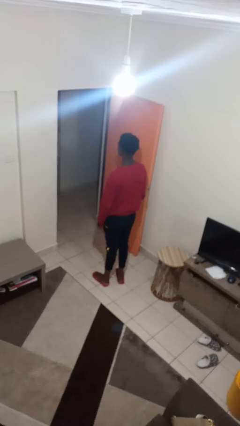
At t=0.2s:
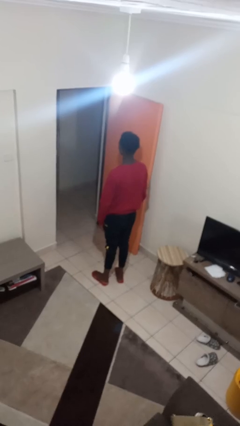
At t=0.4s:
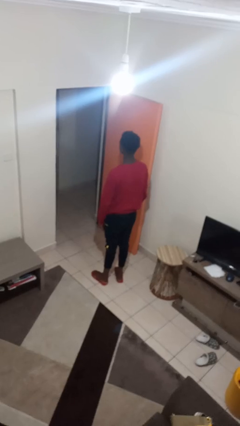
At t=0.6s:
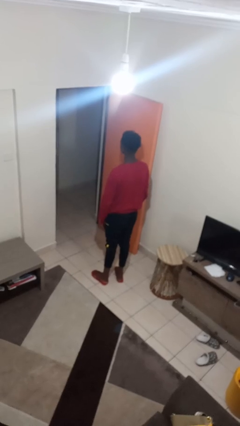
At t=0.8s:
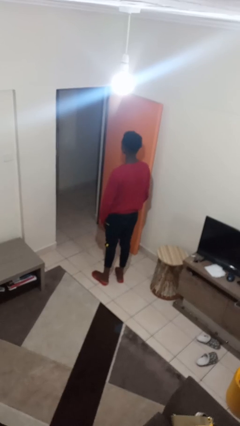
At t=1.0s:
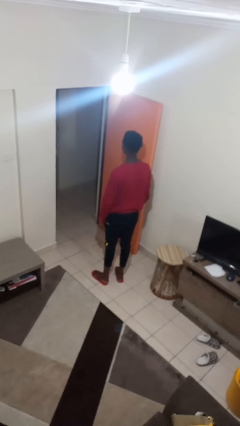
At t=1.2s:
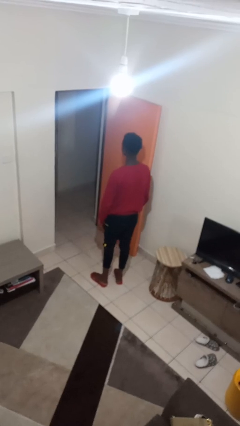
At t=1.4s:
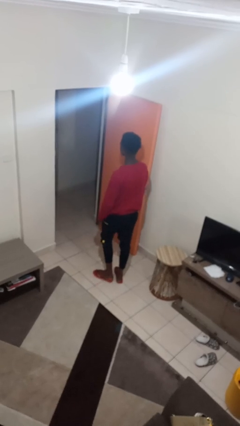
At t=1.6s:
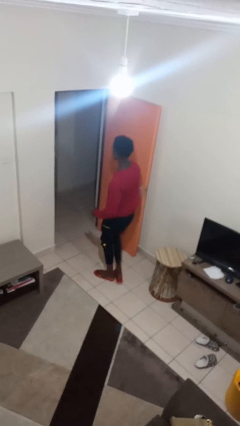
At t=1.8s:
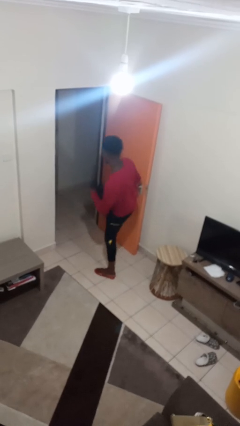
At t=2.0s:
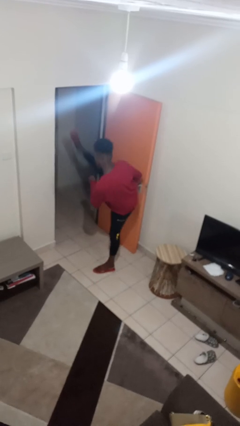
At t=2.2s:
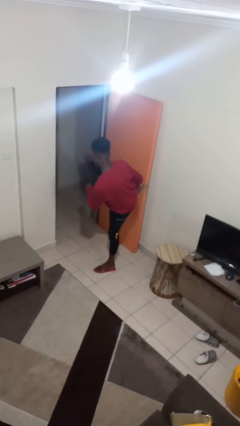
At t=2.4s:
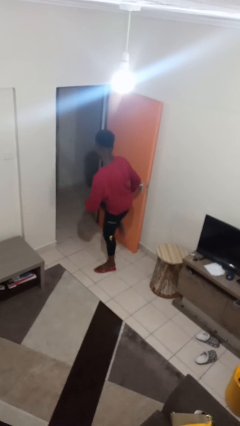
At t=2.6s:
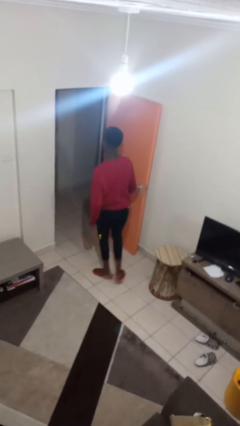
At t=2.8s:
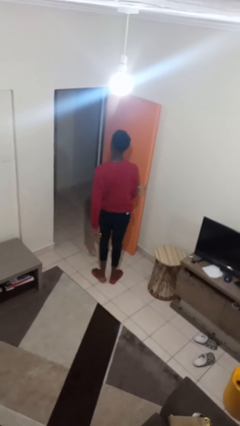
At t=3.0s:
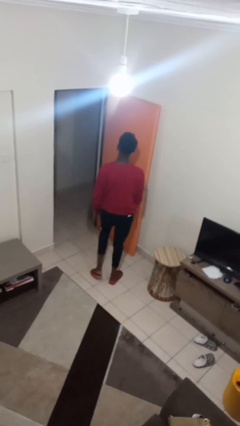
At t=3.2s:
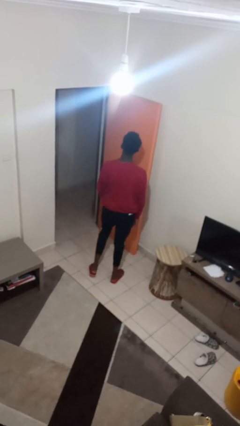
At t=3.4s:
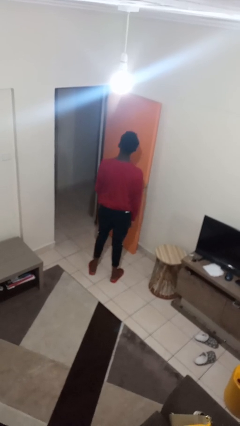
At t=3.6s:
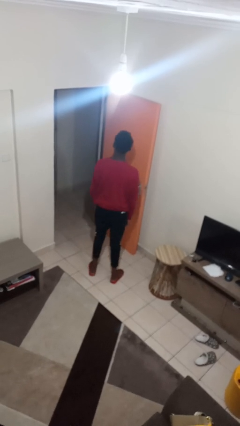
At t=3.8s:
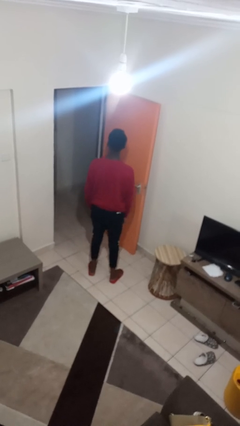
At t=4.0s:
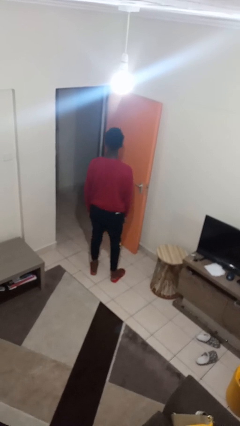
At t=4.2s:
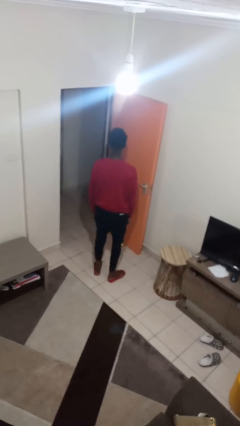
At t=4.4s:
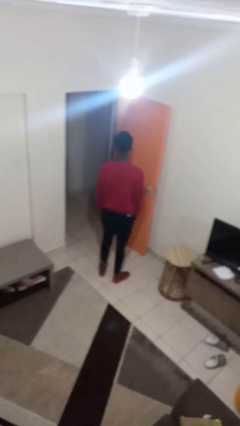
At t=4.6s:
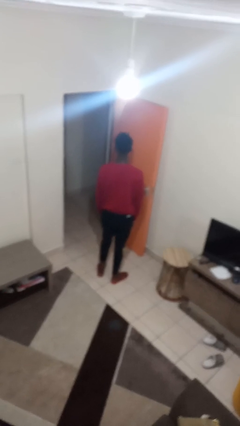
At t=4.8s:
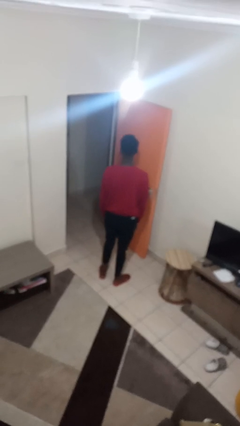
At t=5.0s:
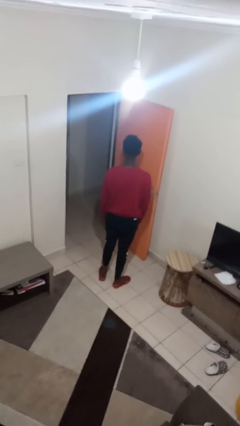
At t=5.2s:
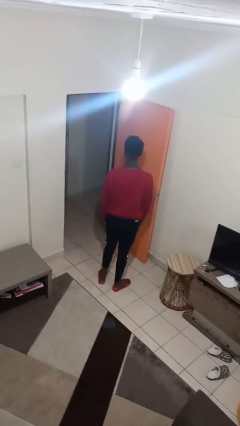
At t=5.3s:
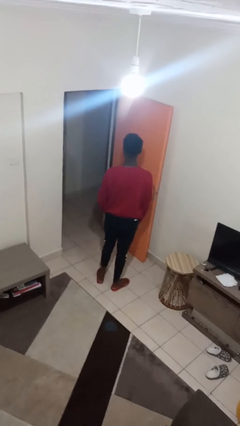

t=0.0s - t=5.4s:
person karate kicks

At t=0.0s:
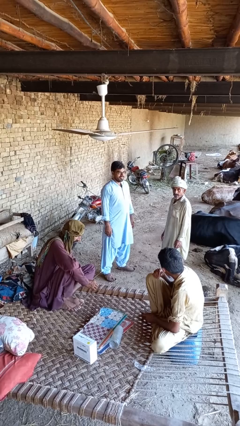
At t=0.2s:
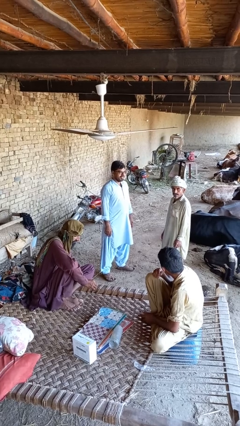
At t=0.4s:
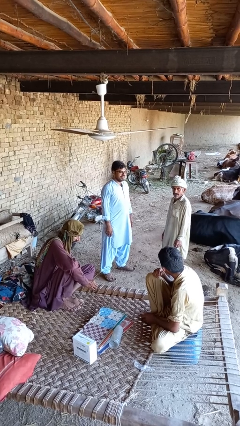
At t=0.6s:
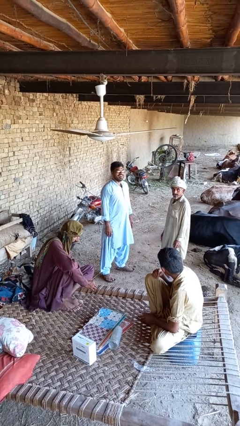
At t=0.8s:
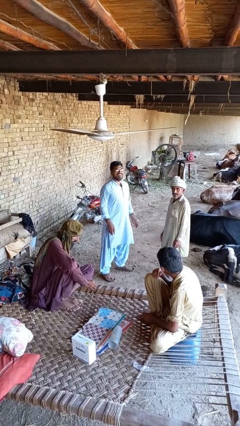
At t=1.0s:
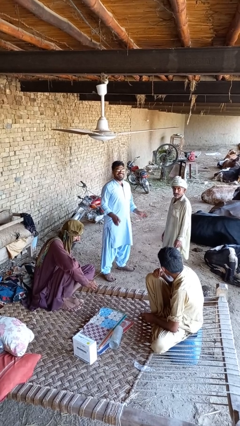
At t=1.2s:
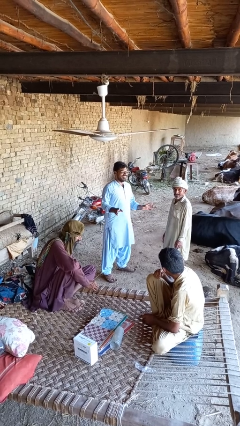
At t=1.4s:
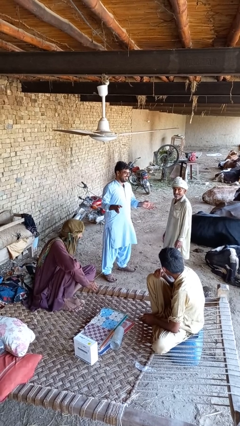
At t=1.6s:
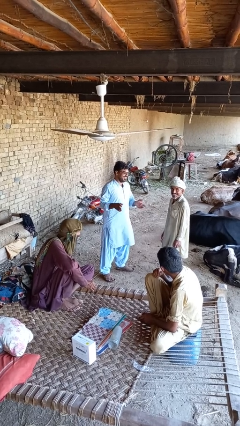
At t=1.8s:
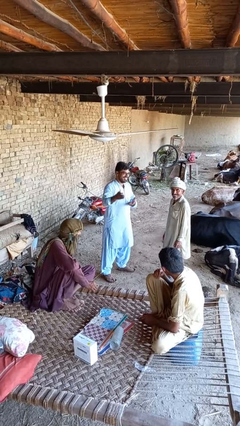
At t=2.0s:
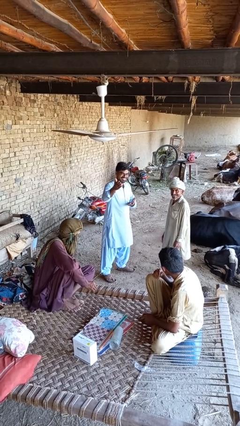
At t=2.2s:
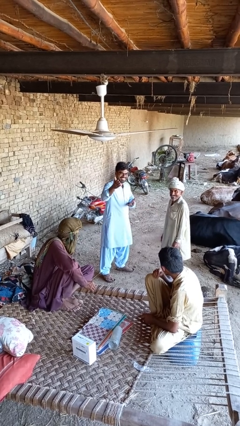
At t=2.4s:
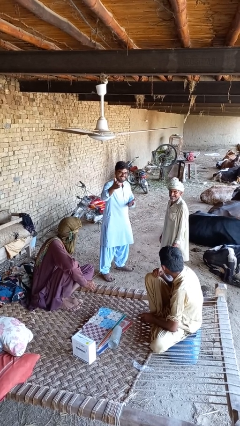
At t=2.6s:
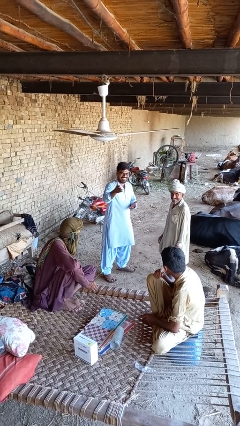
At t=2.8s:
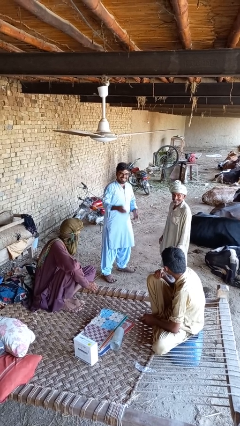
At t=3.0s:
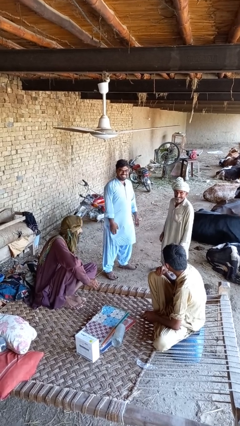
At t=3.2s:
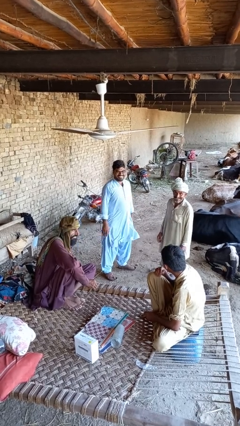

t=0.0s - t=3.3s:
person laughs with person

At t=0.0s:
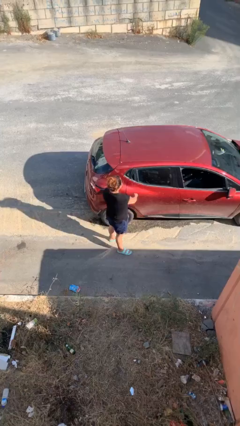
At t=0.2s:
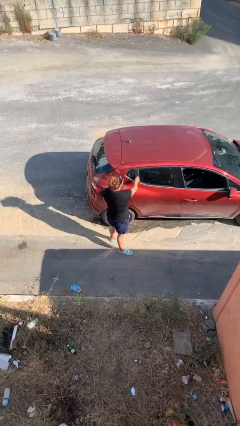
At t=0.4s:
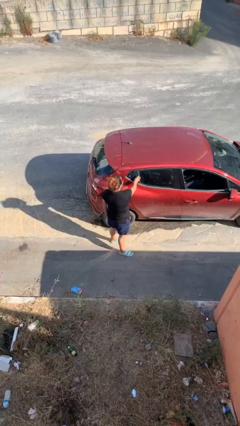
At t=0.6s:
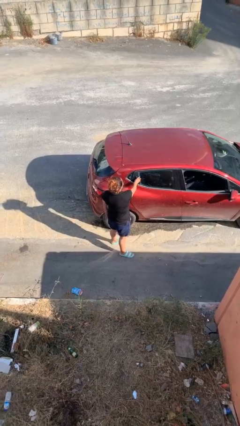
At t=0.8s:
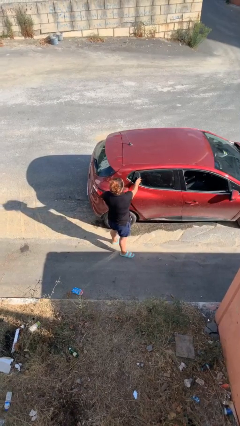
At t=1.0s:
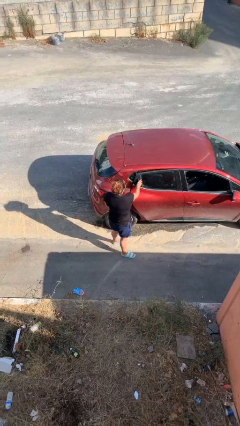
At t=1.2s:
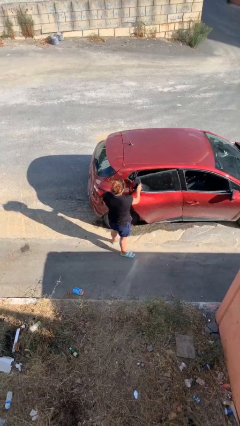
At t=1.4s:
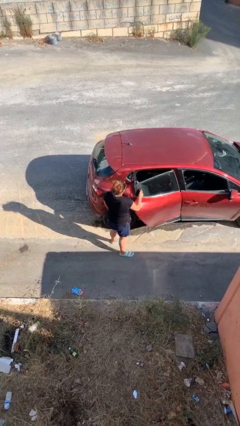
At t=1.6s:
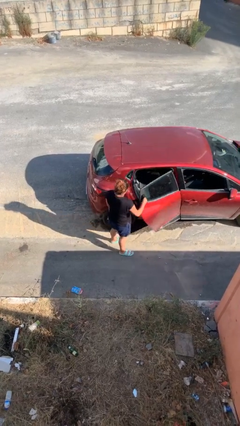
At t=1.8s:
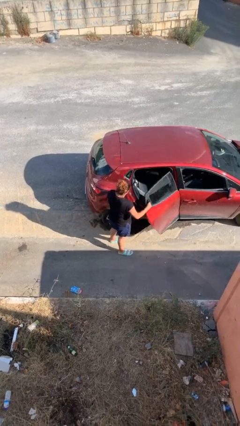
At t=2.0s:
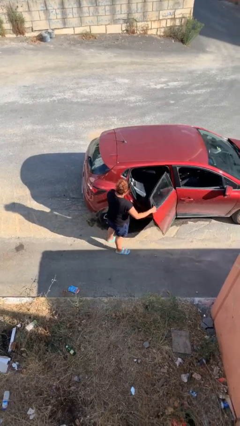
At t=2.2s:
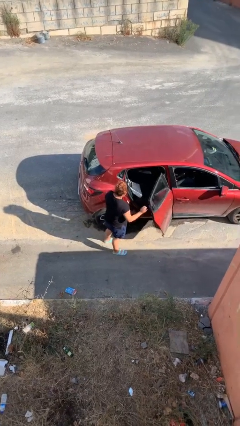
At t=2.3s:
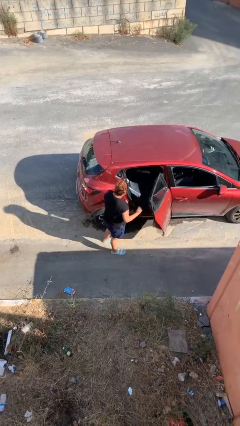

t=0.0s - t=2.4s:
person opens car door

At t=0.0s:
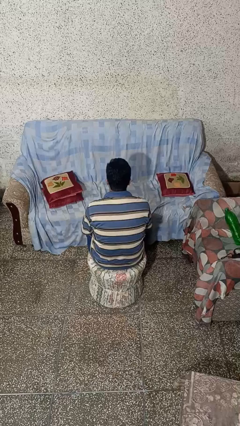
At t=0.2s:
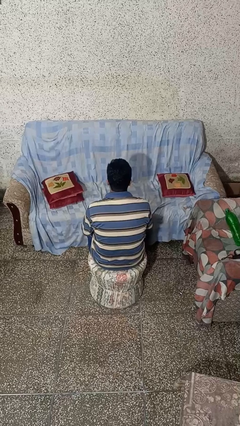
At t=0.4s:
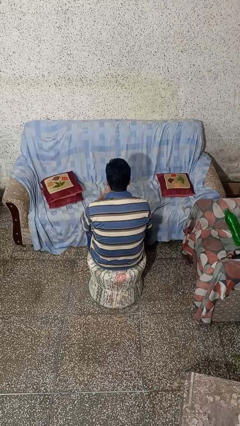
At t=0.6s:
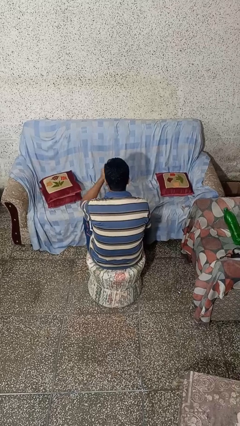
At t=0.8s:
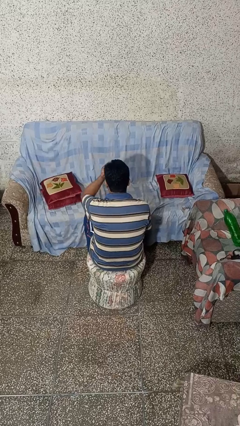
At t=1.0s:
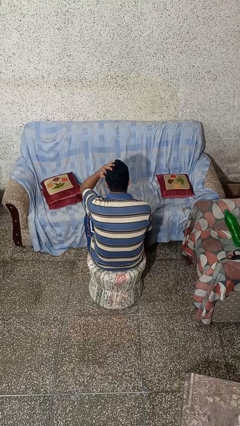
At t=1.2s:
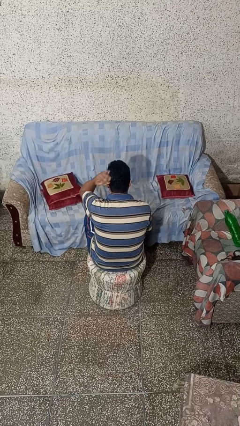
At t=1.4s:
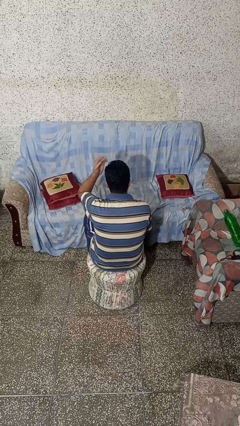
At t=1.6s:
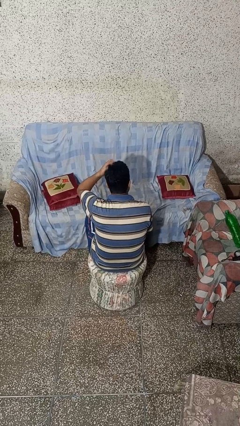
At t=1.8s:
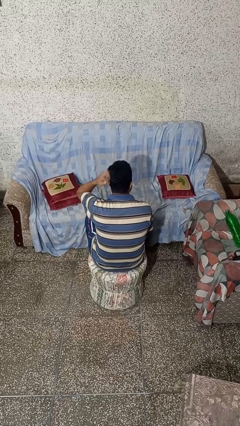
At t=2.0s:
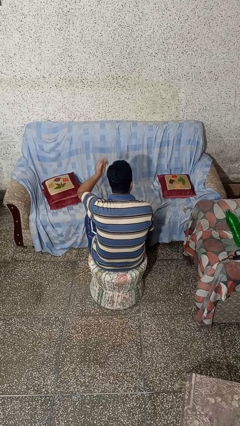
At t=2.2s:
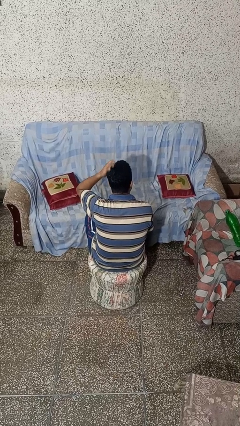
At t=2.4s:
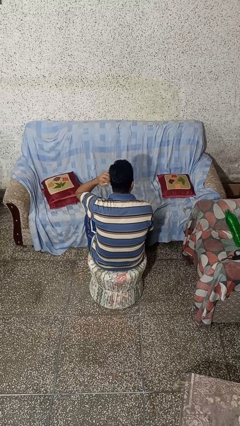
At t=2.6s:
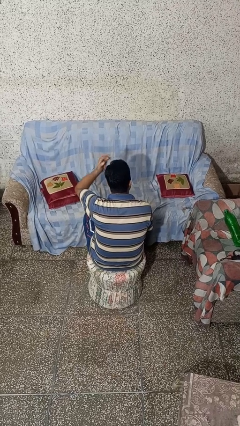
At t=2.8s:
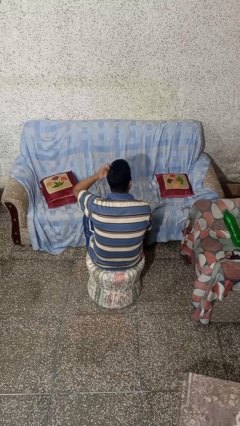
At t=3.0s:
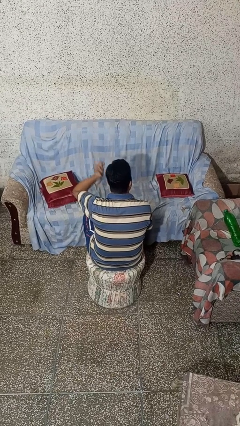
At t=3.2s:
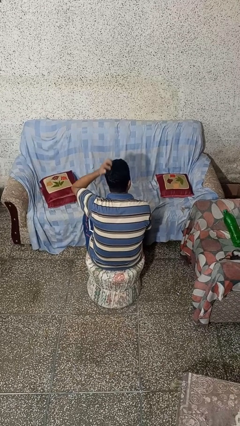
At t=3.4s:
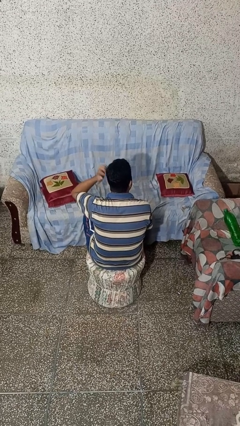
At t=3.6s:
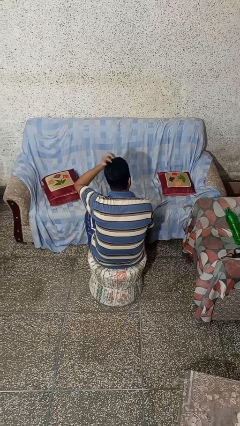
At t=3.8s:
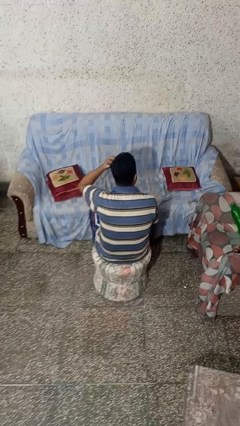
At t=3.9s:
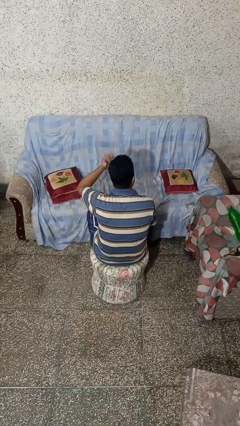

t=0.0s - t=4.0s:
person strokes hair

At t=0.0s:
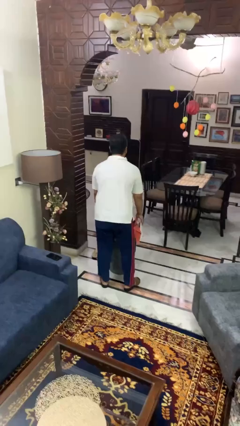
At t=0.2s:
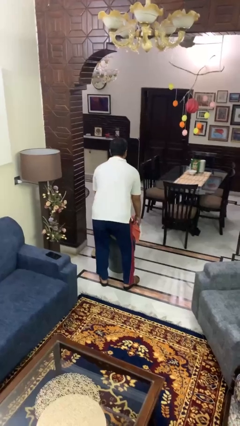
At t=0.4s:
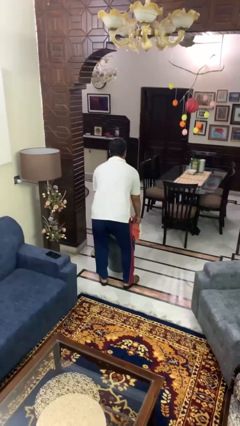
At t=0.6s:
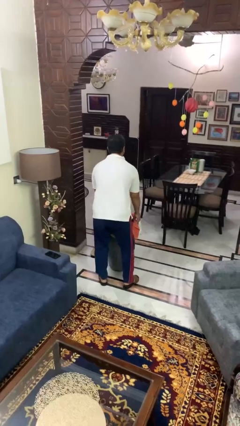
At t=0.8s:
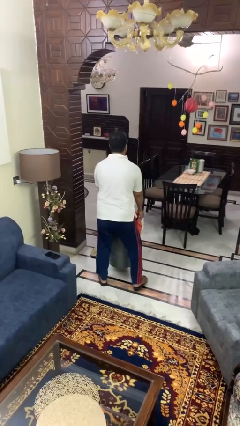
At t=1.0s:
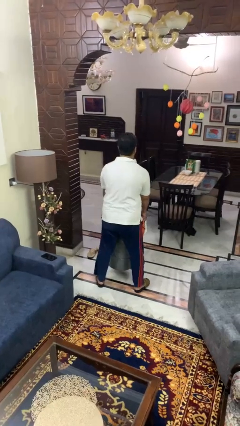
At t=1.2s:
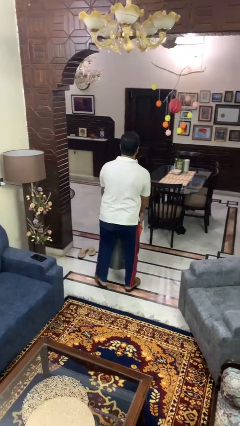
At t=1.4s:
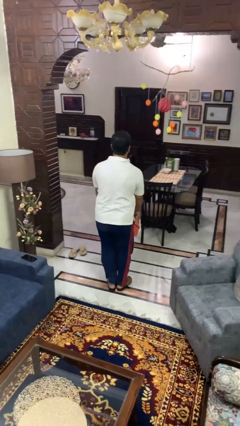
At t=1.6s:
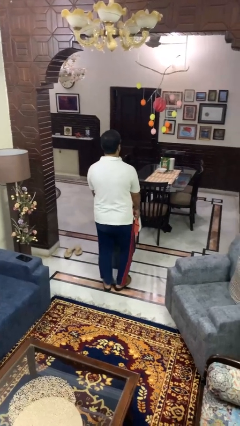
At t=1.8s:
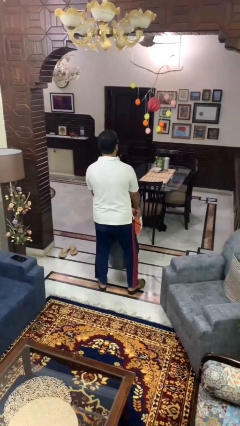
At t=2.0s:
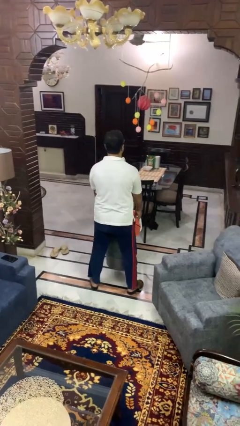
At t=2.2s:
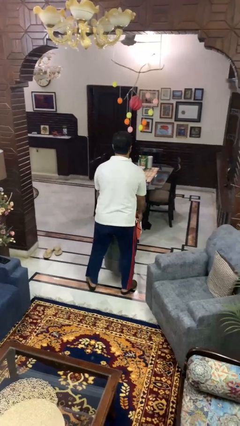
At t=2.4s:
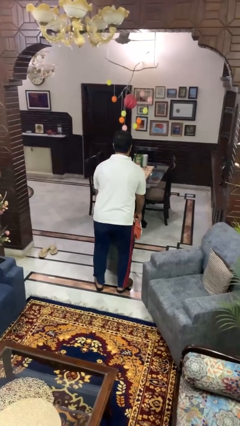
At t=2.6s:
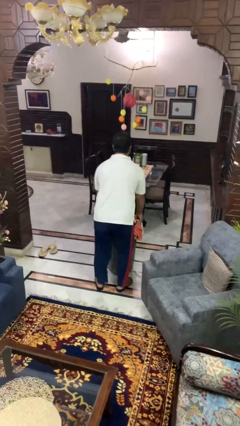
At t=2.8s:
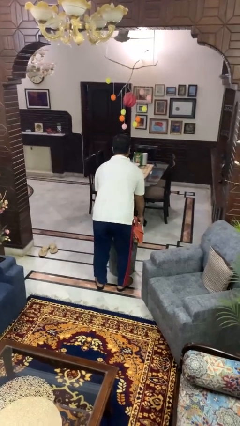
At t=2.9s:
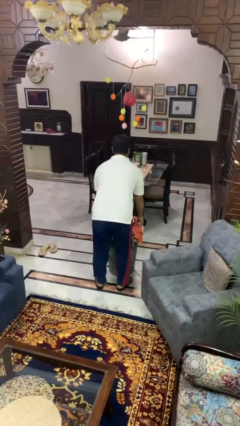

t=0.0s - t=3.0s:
person carries laundry basket
